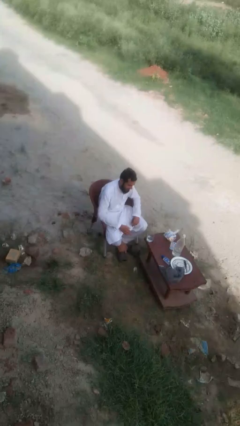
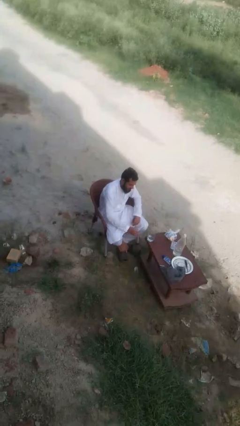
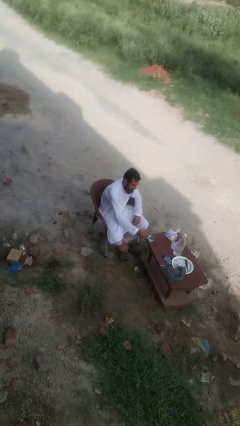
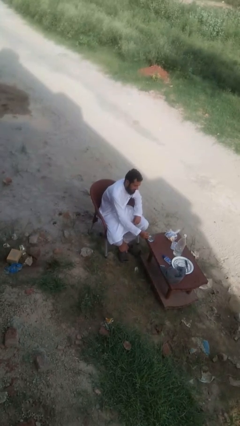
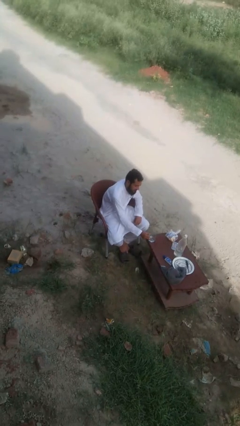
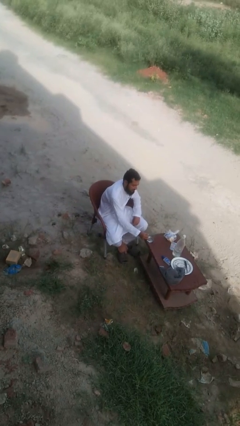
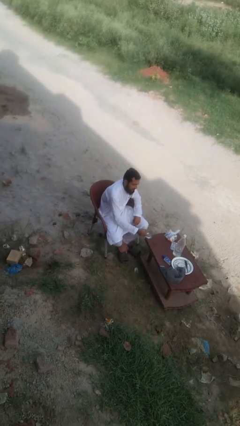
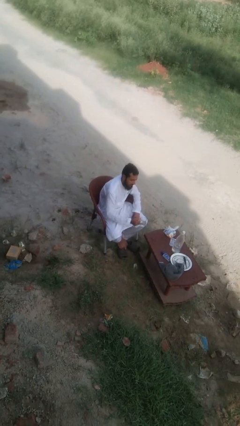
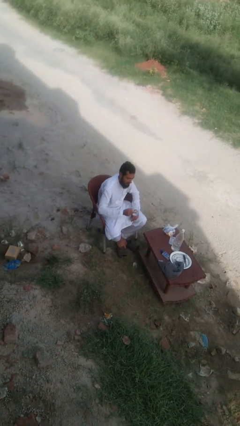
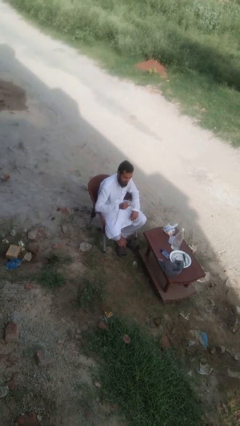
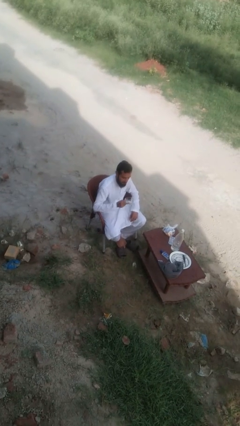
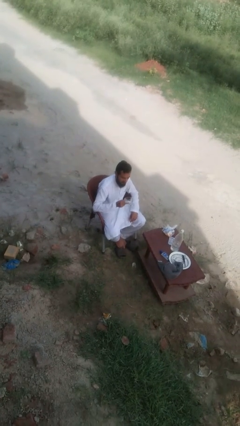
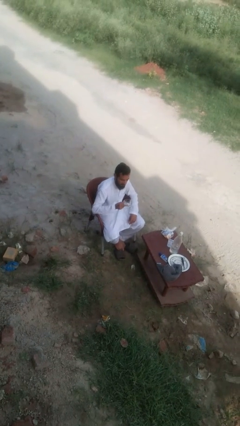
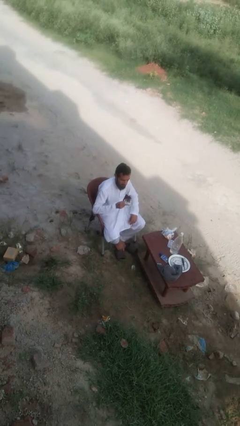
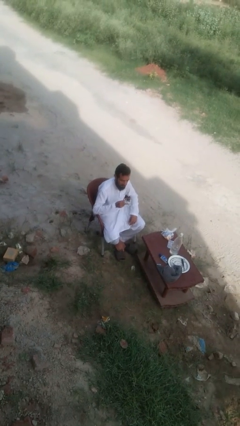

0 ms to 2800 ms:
person picks up object from table

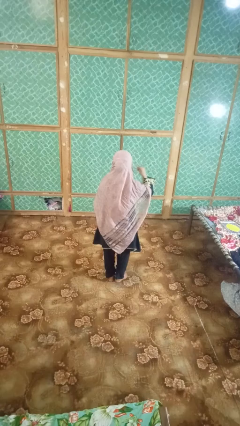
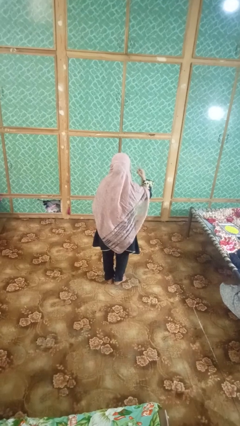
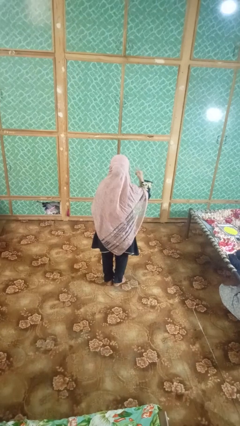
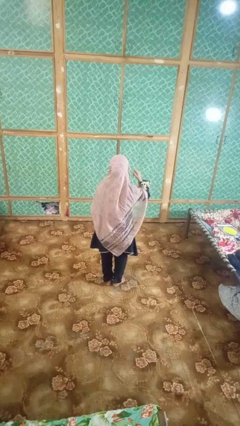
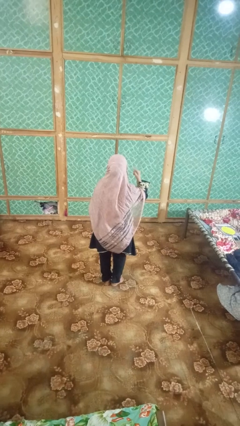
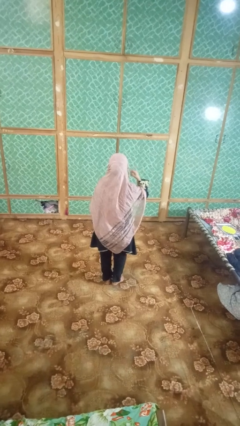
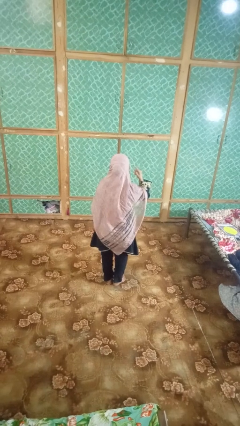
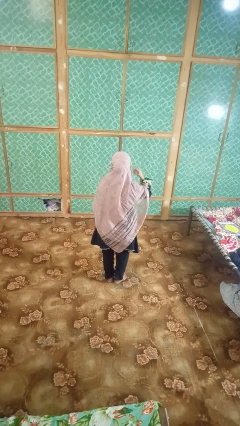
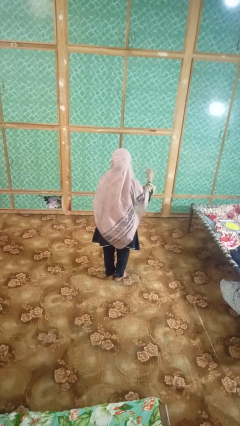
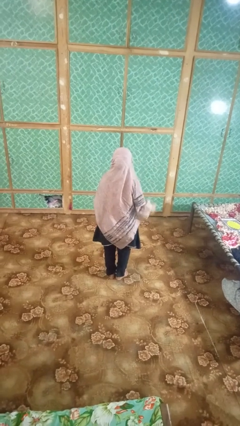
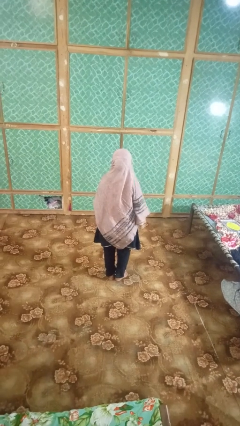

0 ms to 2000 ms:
person gestures listen closely

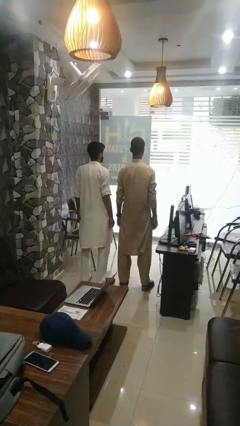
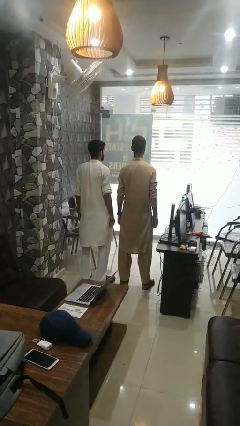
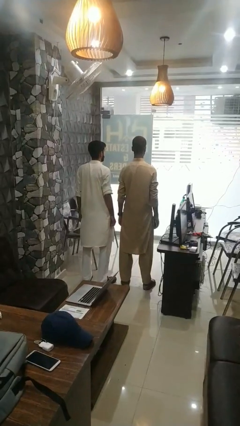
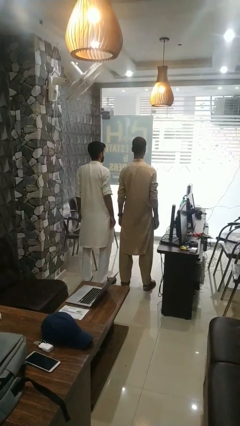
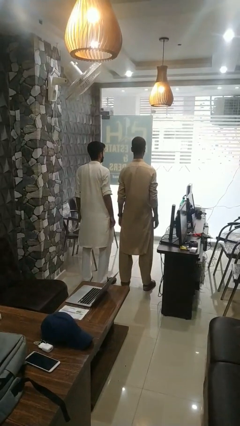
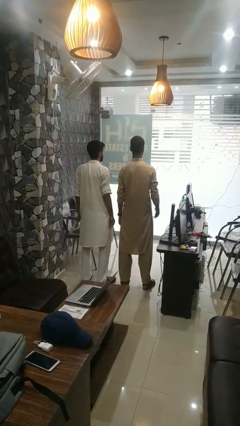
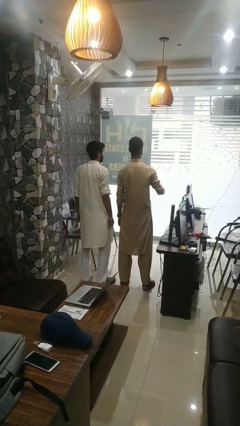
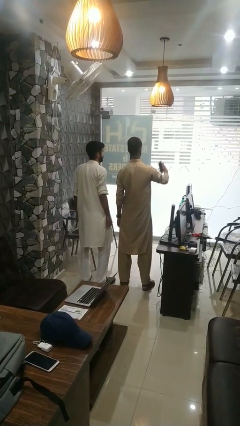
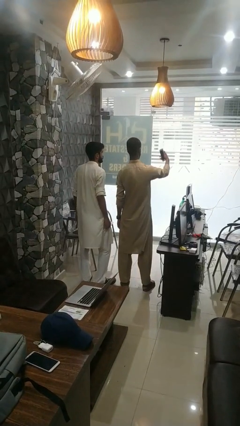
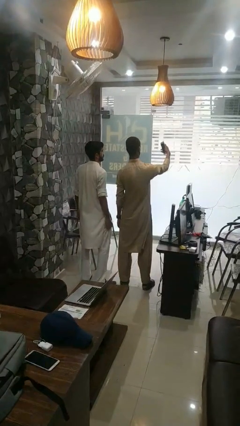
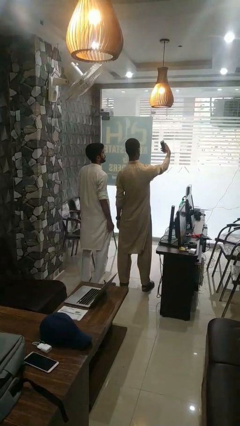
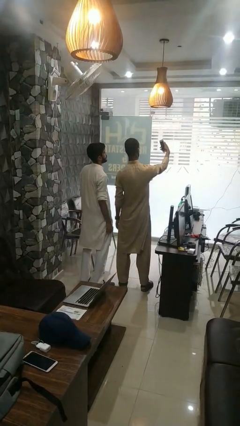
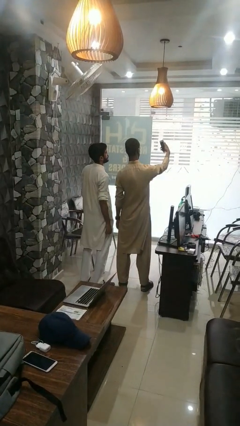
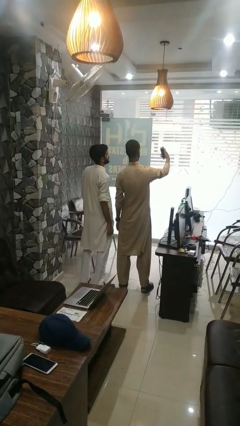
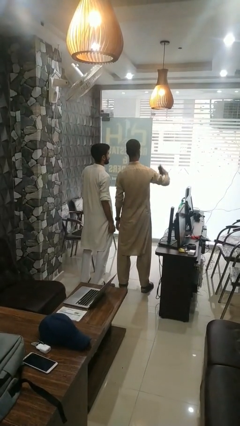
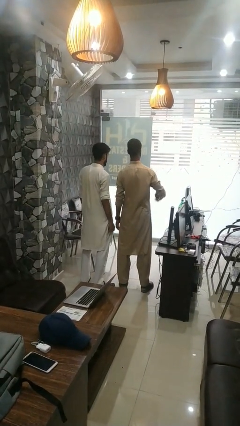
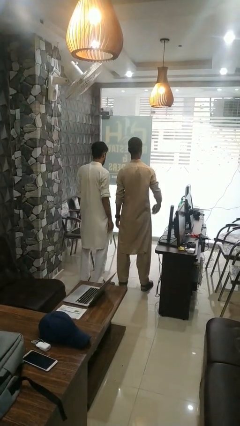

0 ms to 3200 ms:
person takes selfie with person

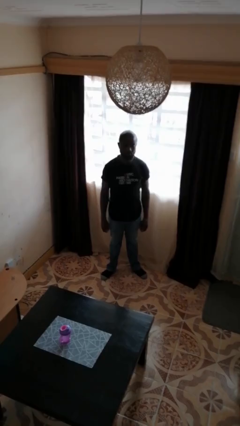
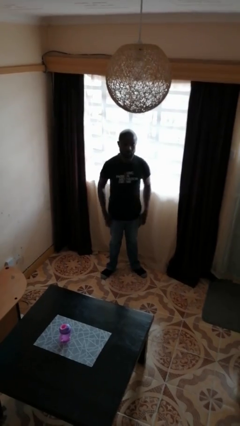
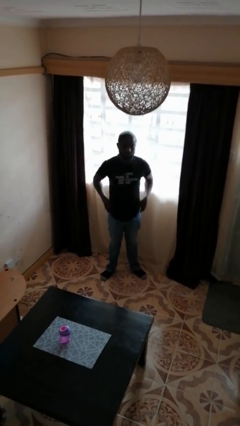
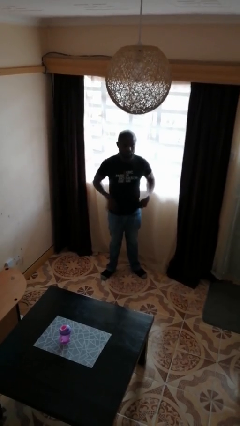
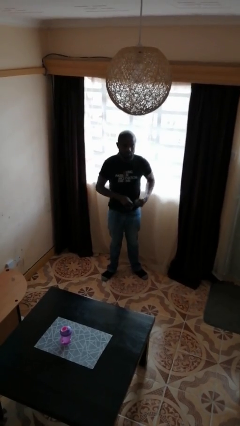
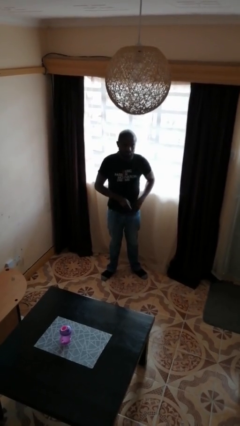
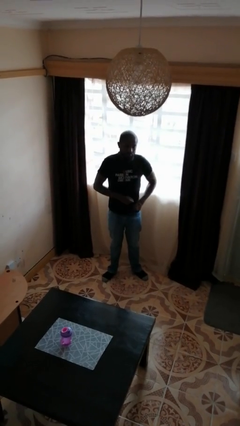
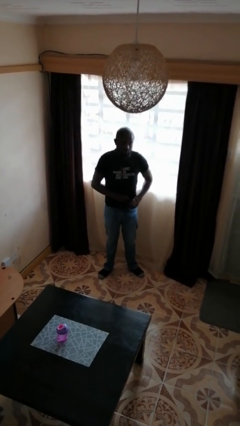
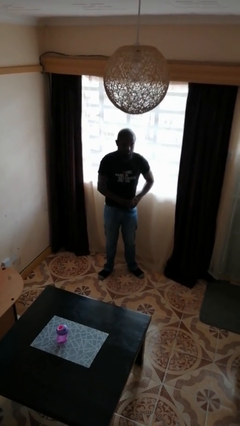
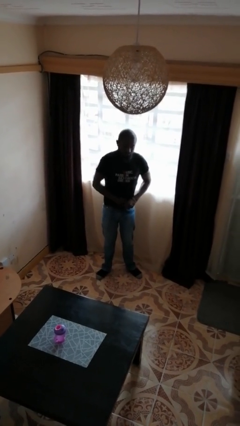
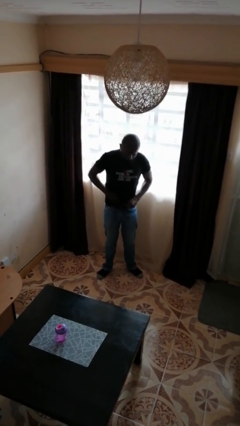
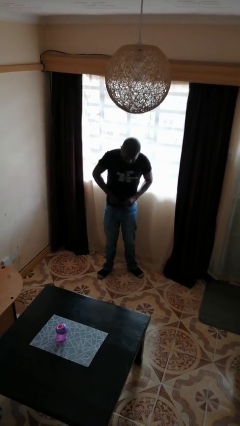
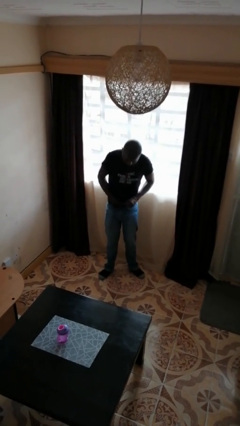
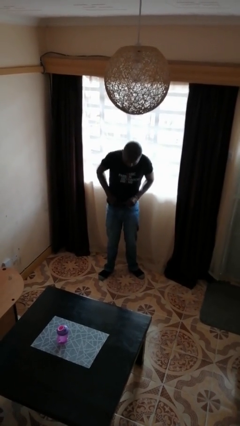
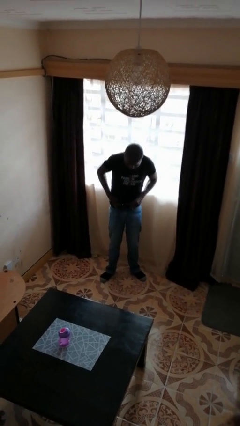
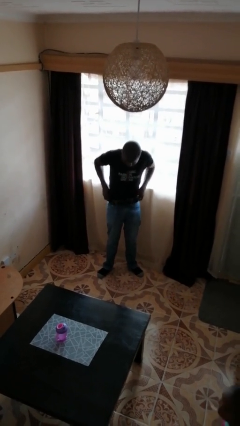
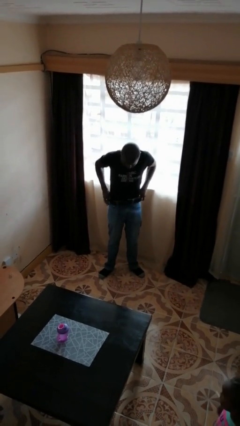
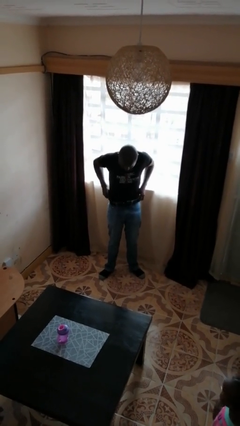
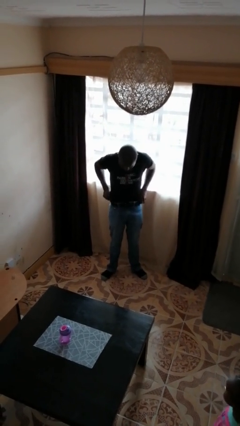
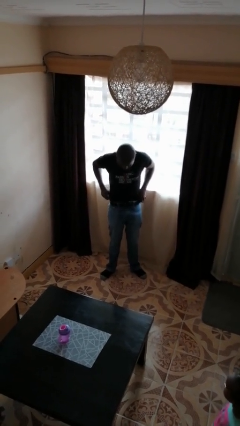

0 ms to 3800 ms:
person tucks in shirt

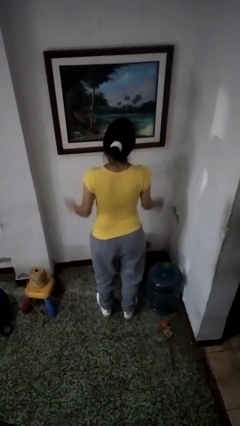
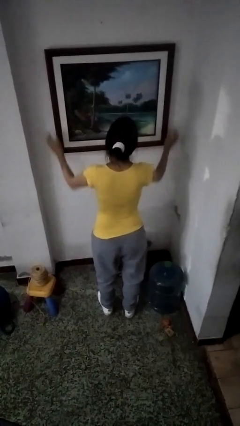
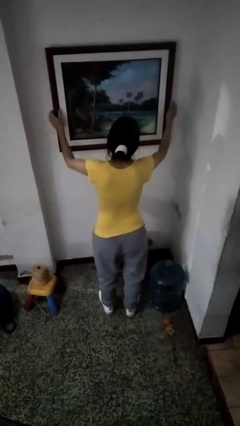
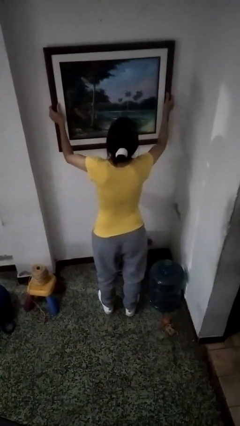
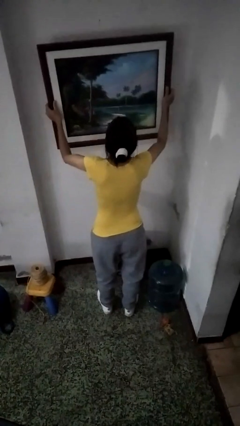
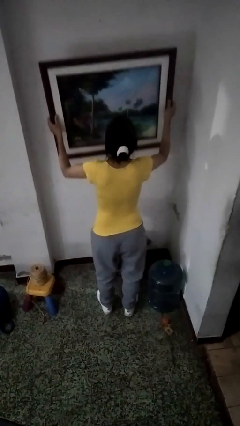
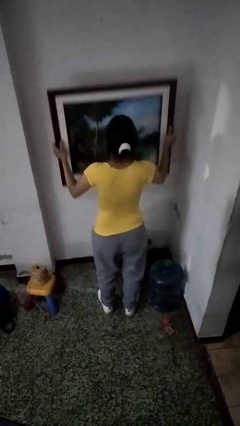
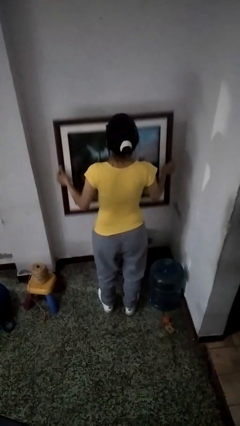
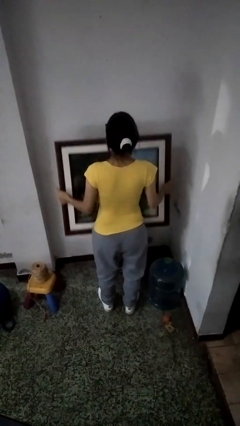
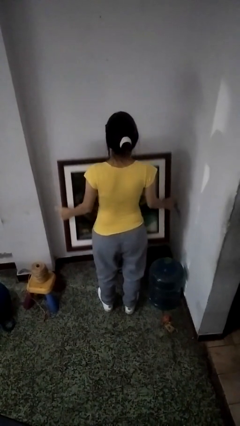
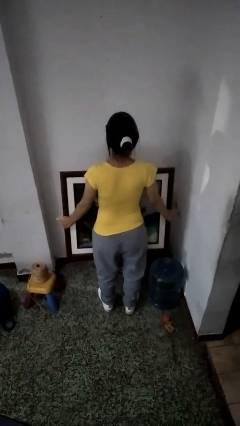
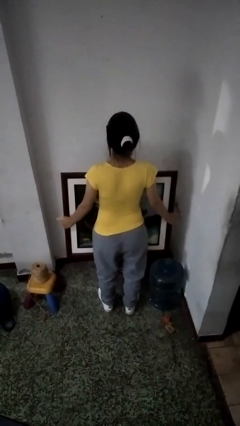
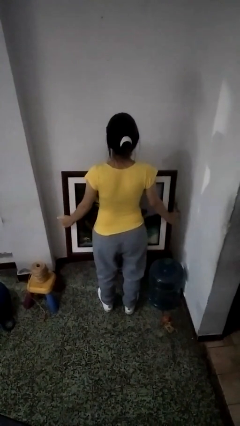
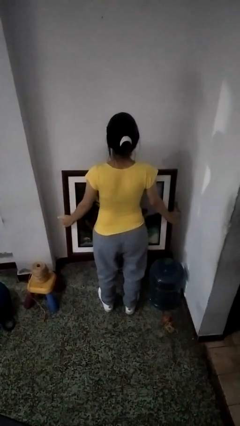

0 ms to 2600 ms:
person takes down picture frame

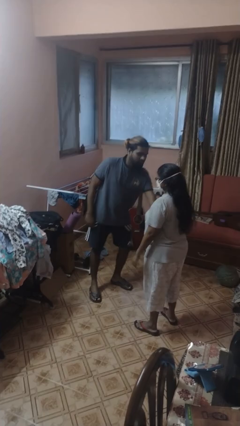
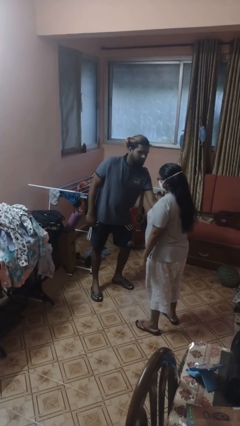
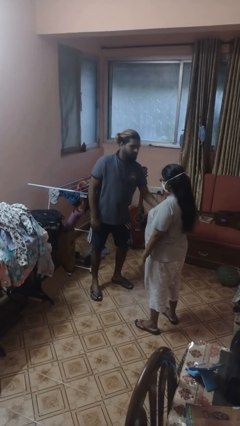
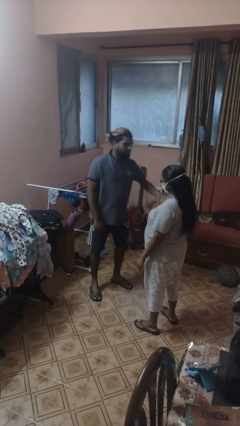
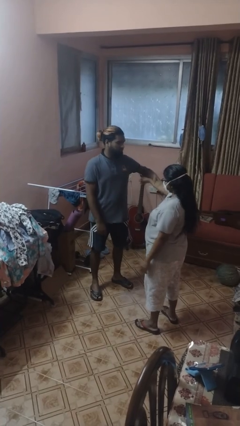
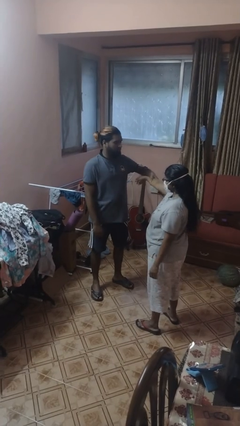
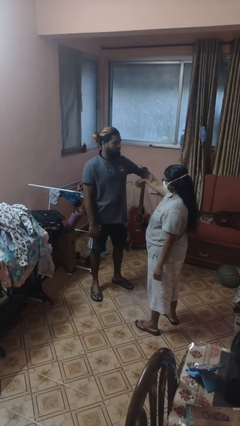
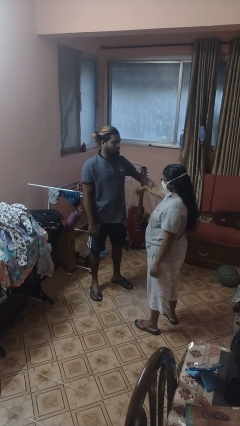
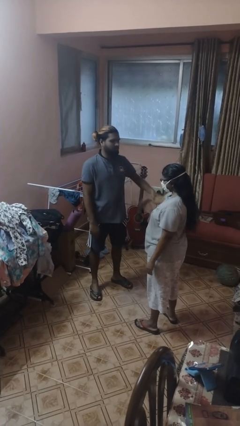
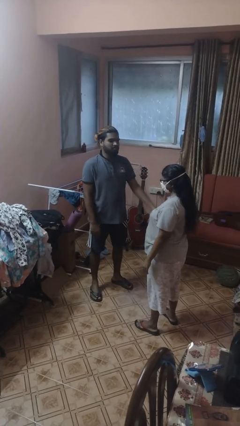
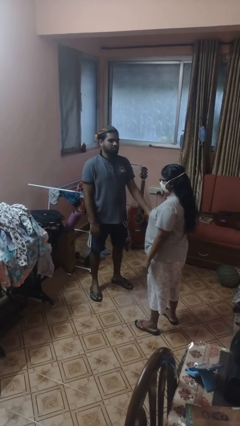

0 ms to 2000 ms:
person grabs person by forearm

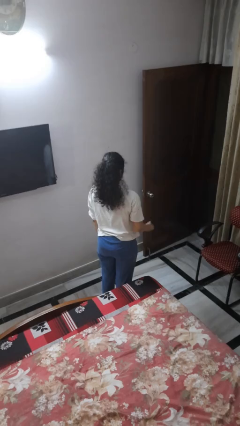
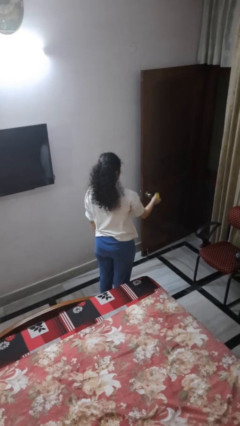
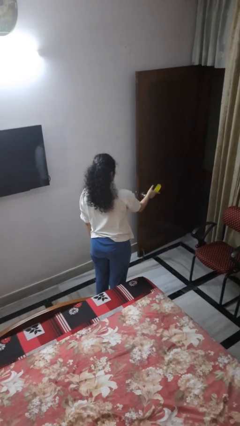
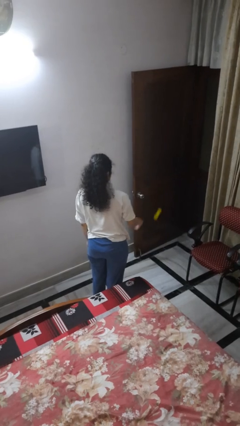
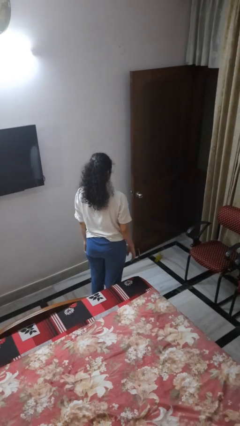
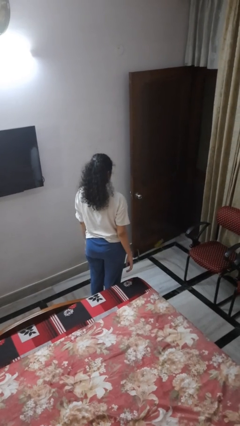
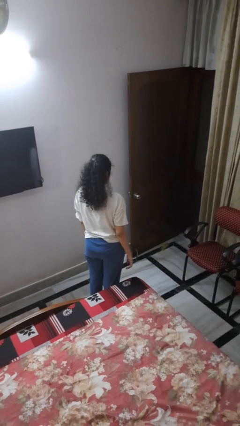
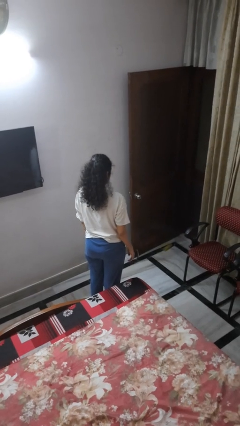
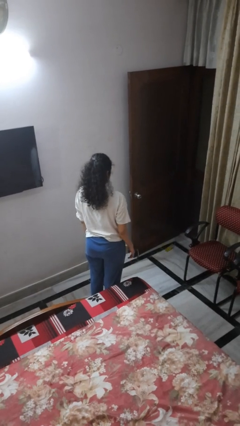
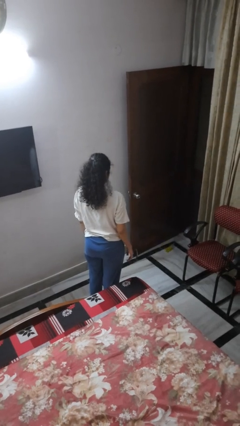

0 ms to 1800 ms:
person throws object to ground
